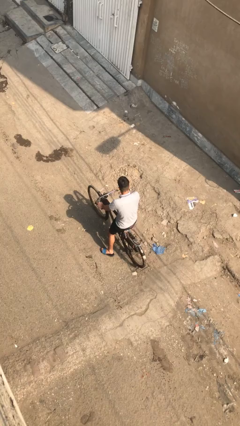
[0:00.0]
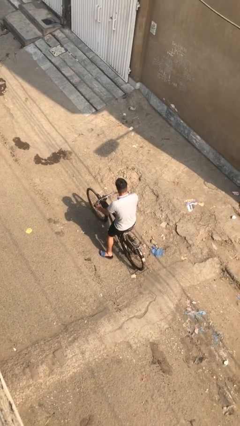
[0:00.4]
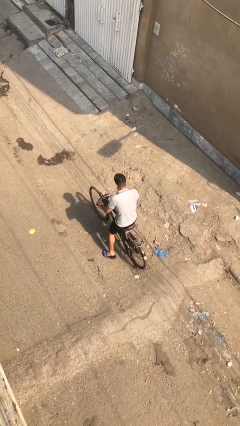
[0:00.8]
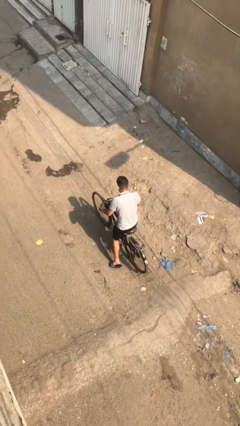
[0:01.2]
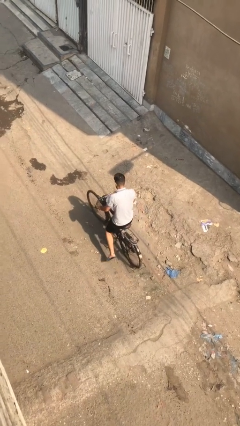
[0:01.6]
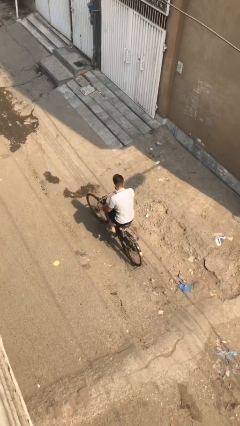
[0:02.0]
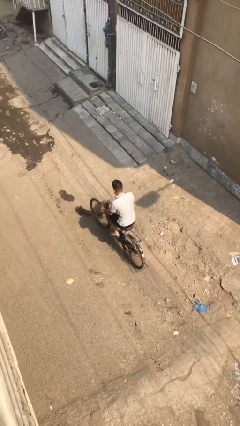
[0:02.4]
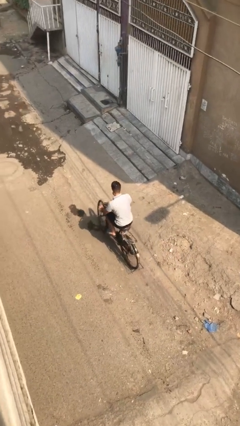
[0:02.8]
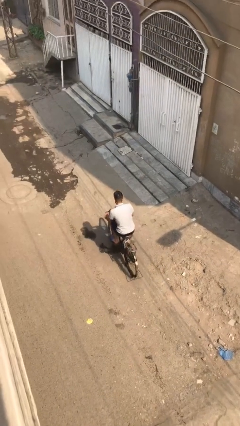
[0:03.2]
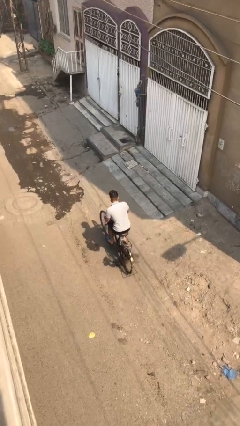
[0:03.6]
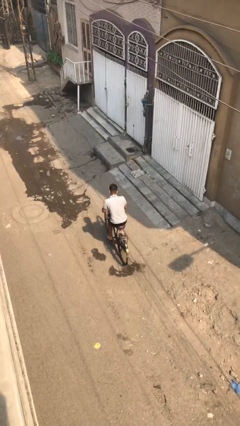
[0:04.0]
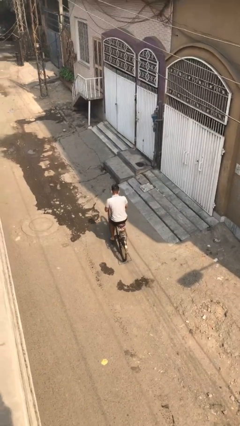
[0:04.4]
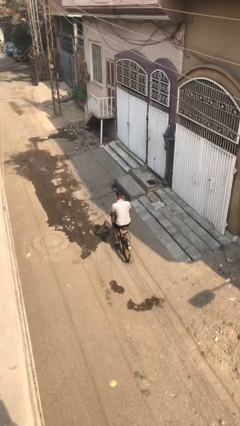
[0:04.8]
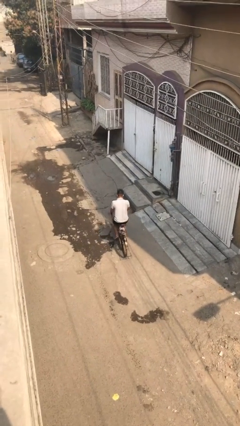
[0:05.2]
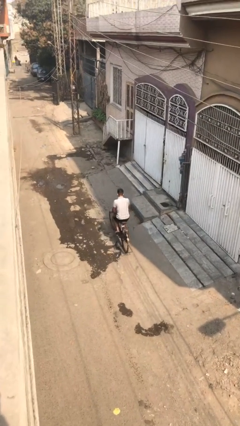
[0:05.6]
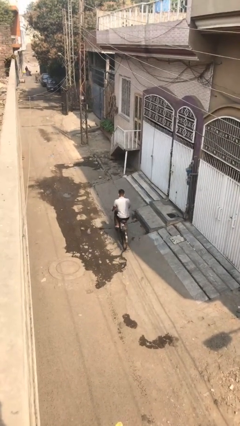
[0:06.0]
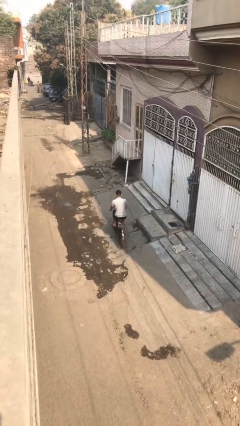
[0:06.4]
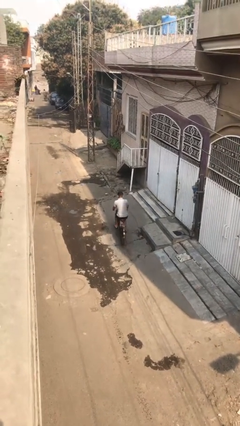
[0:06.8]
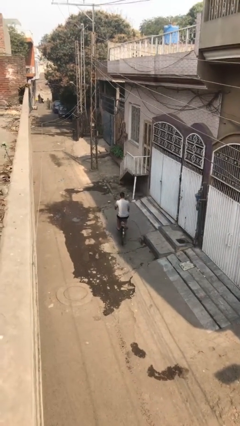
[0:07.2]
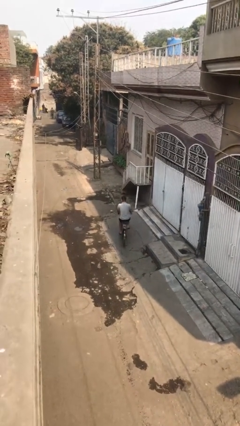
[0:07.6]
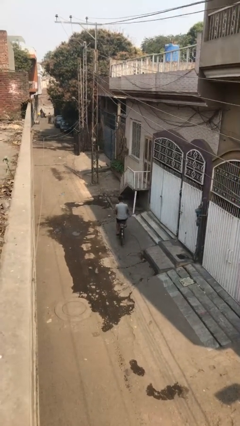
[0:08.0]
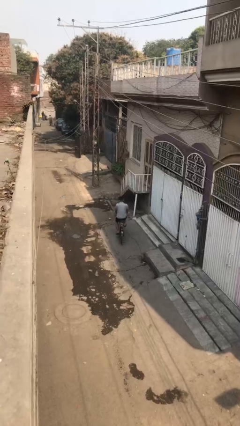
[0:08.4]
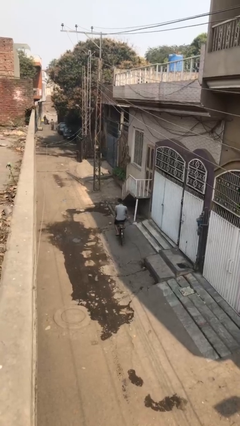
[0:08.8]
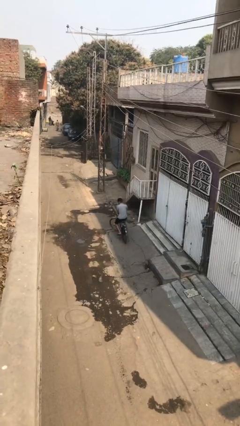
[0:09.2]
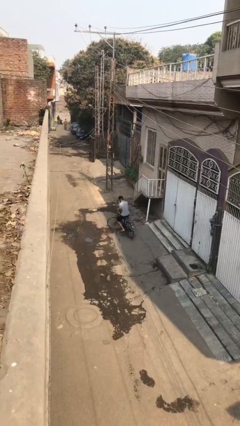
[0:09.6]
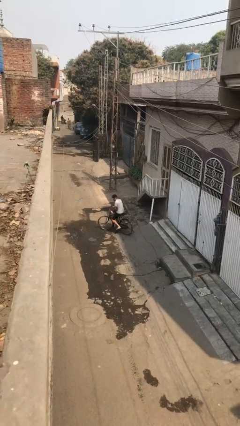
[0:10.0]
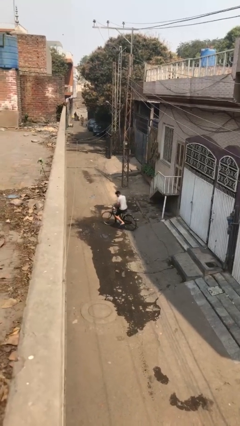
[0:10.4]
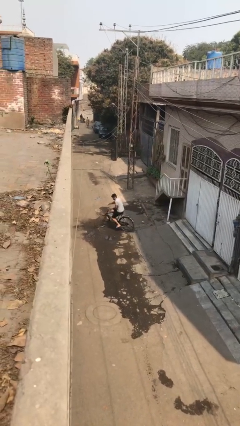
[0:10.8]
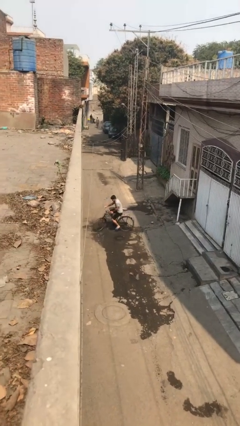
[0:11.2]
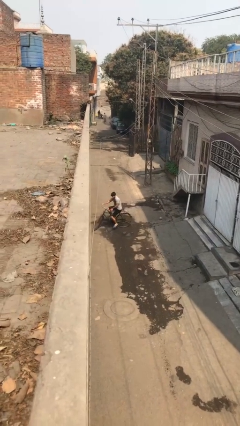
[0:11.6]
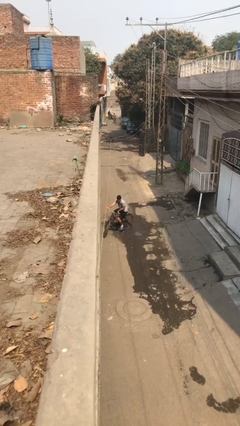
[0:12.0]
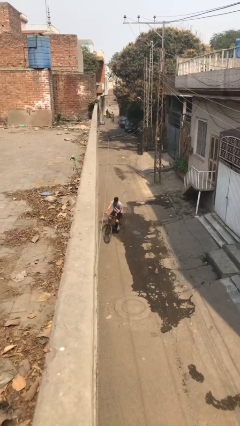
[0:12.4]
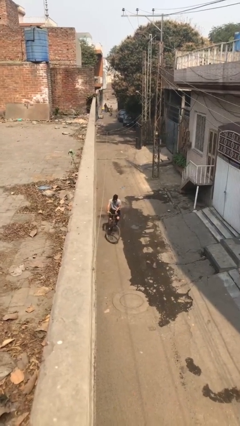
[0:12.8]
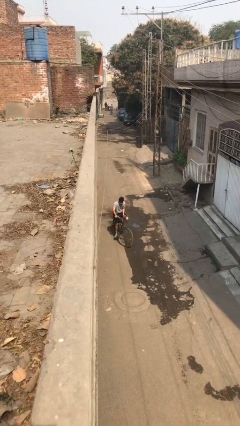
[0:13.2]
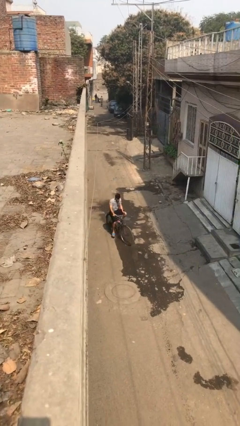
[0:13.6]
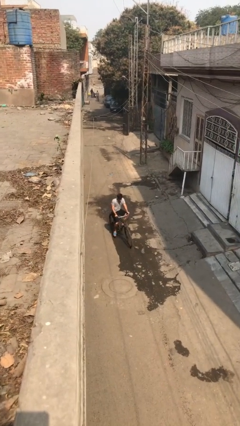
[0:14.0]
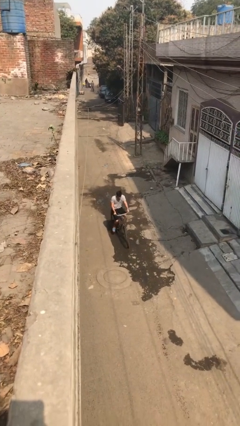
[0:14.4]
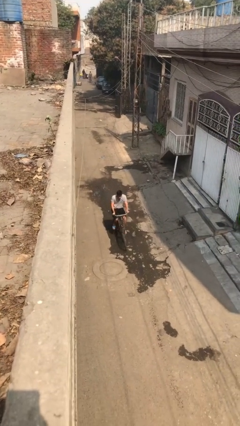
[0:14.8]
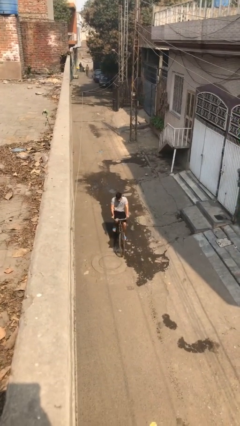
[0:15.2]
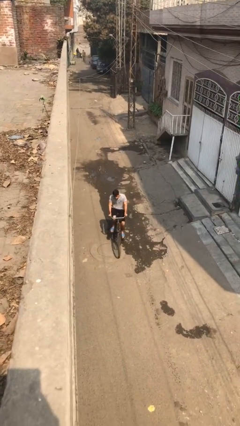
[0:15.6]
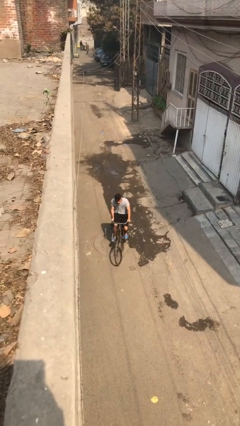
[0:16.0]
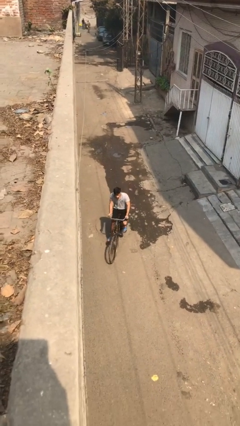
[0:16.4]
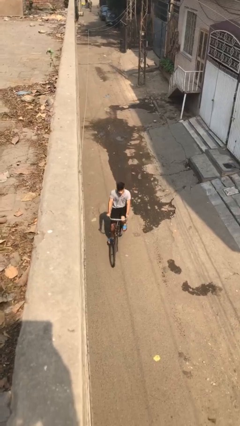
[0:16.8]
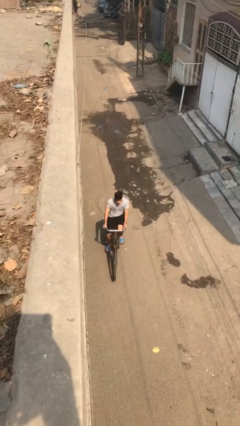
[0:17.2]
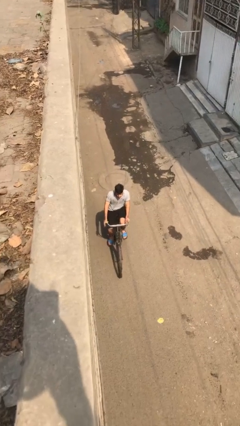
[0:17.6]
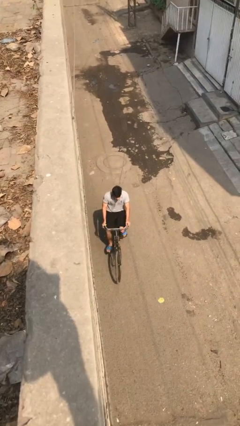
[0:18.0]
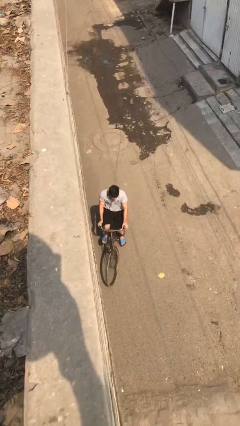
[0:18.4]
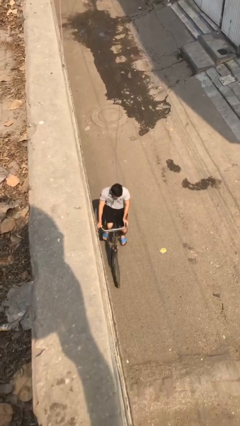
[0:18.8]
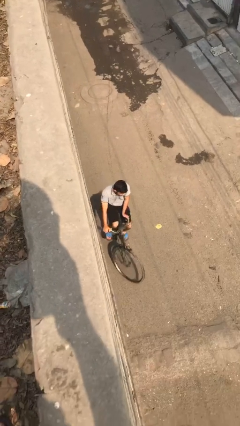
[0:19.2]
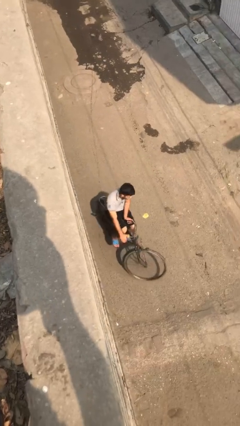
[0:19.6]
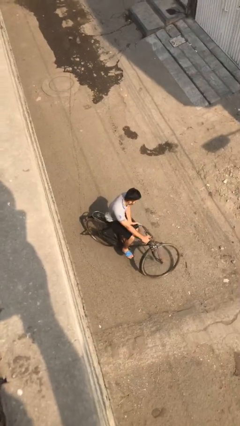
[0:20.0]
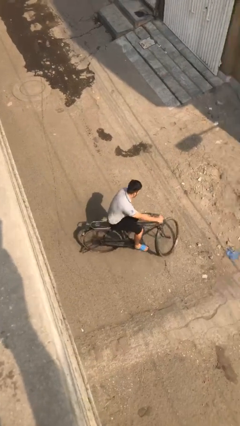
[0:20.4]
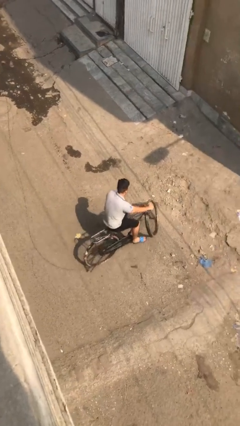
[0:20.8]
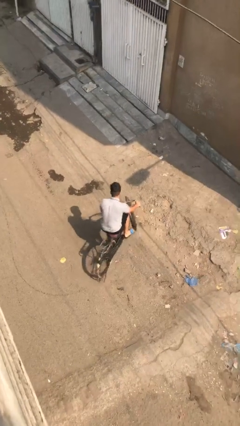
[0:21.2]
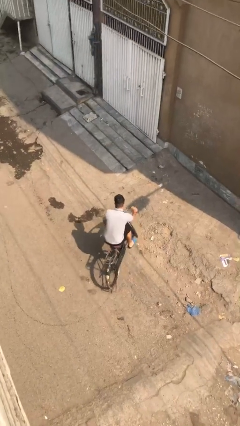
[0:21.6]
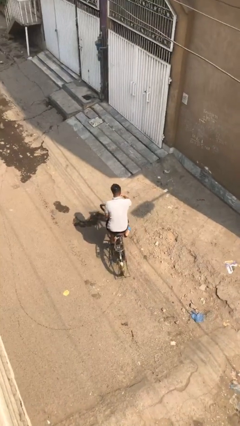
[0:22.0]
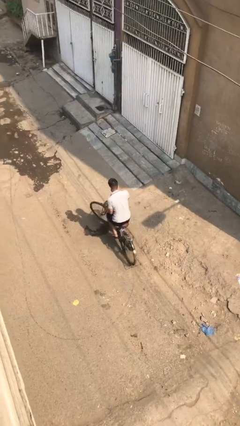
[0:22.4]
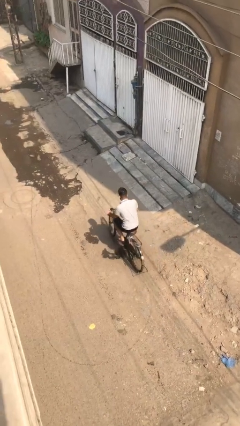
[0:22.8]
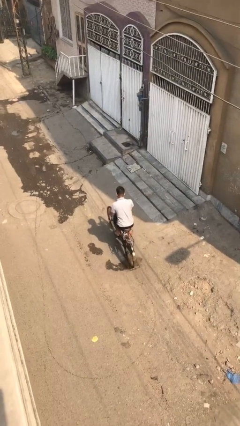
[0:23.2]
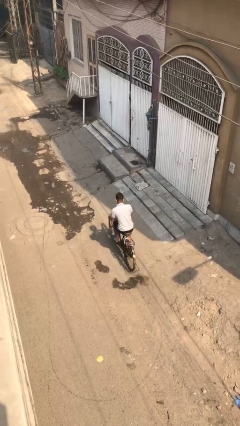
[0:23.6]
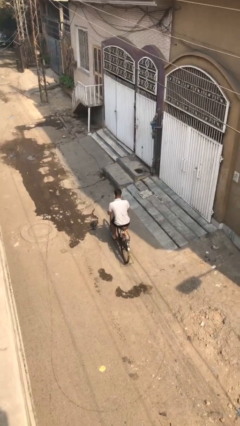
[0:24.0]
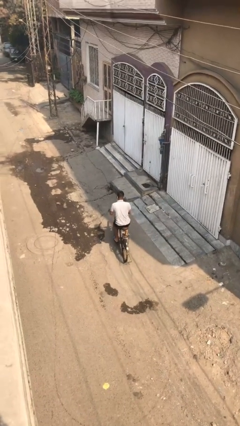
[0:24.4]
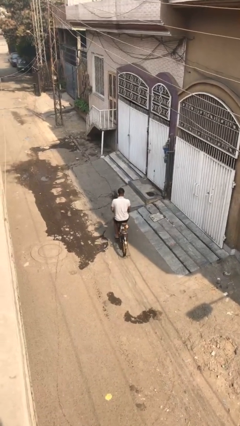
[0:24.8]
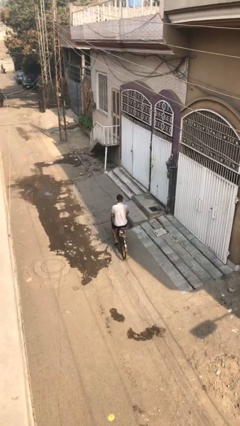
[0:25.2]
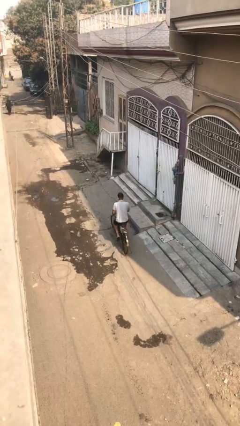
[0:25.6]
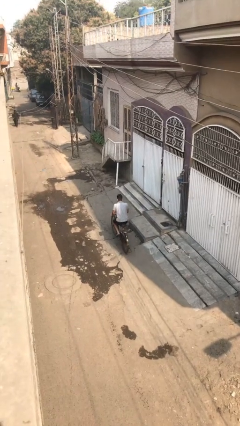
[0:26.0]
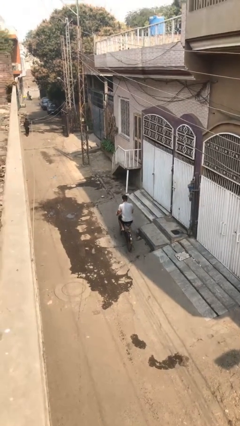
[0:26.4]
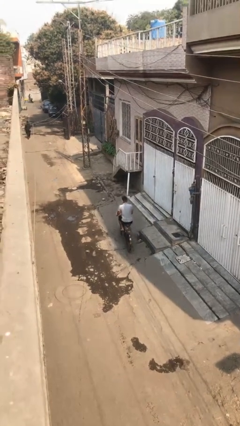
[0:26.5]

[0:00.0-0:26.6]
person rides bicycle

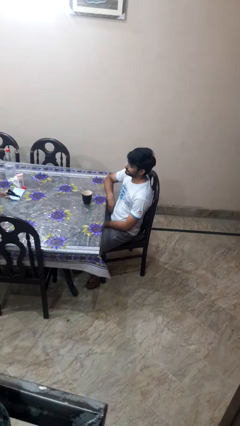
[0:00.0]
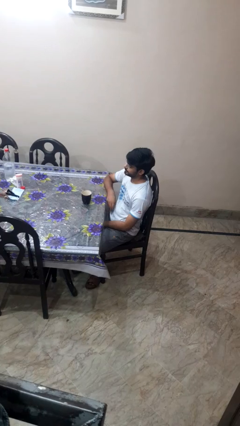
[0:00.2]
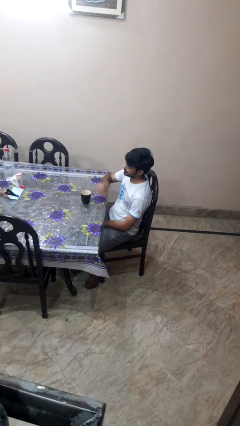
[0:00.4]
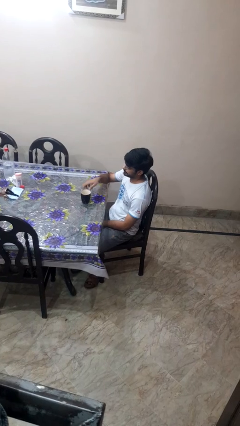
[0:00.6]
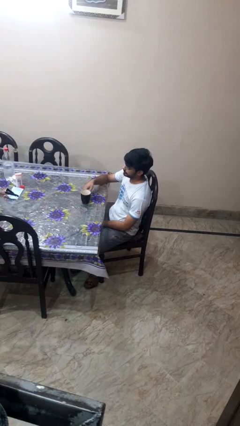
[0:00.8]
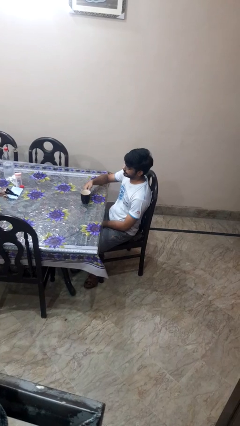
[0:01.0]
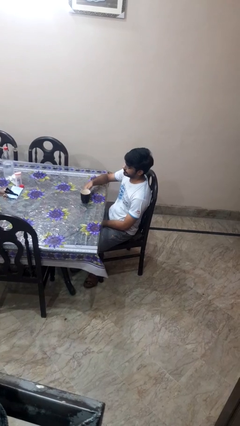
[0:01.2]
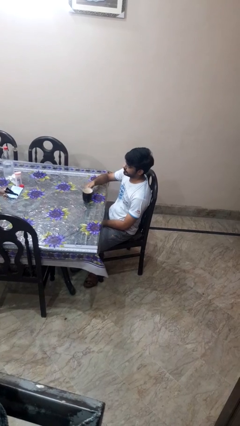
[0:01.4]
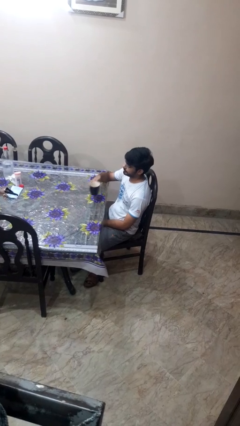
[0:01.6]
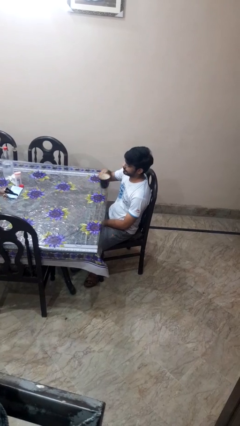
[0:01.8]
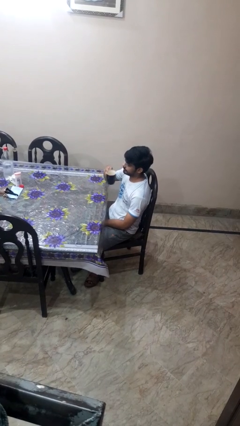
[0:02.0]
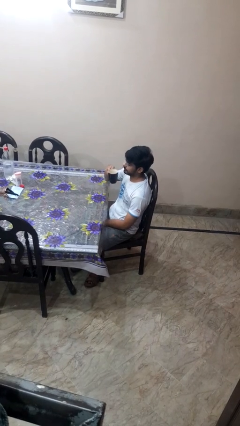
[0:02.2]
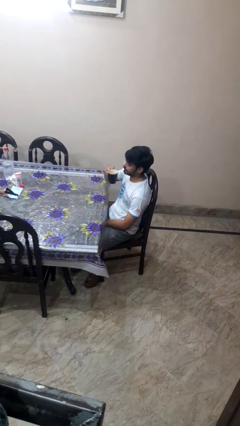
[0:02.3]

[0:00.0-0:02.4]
person picks up object from table

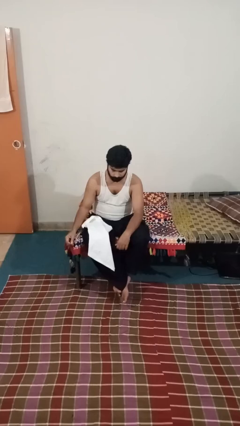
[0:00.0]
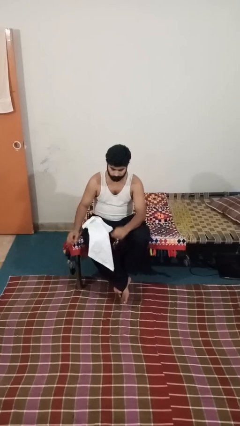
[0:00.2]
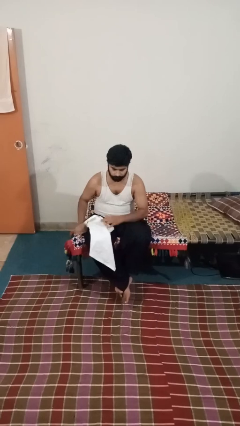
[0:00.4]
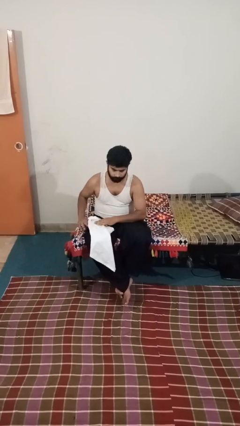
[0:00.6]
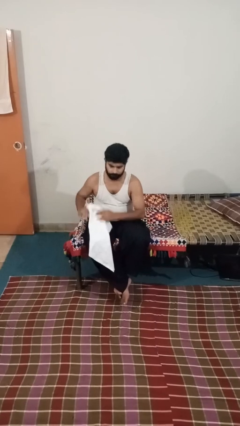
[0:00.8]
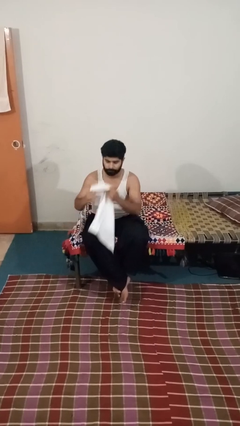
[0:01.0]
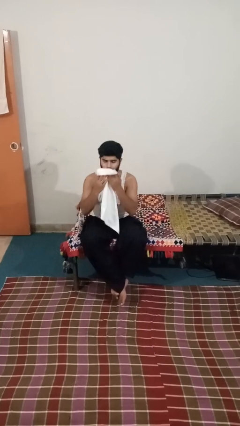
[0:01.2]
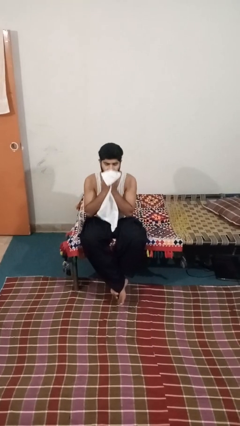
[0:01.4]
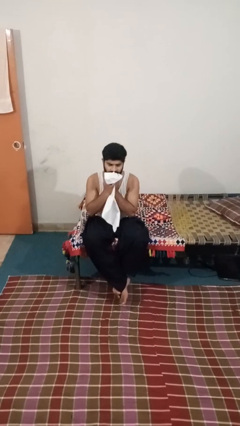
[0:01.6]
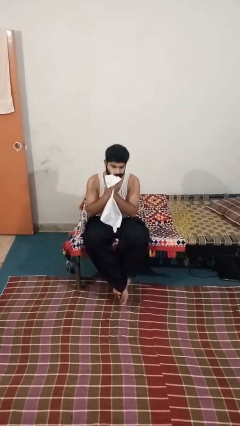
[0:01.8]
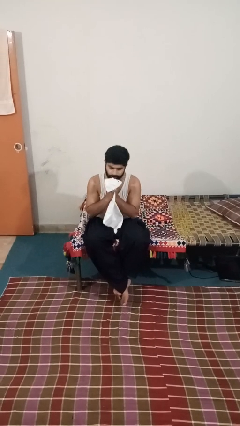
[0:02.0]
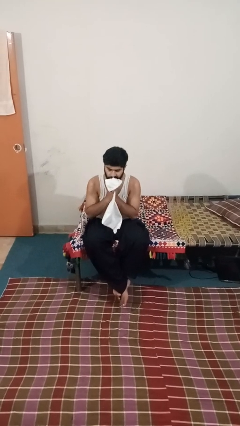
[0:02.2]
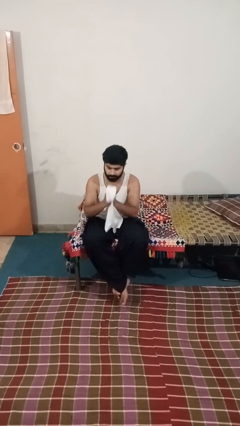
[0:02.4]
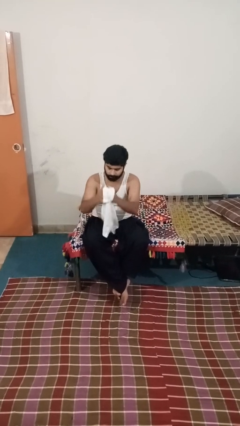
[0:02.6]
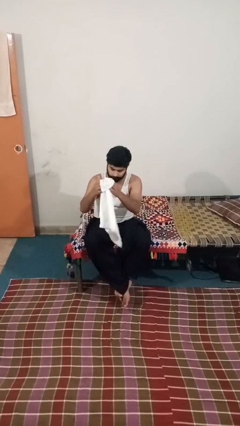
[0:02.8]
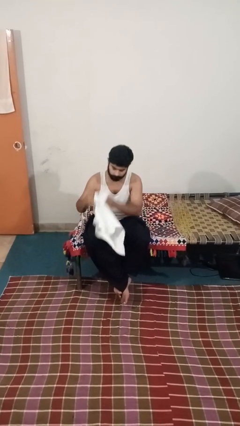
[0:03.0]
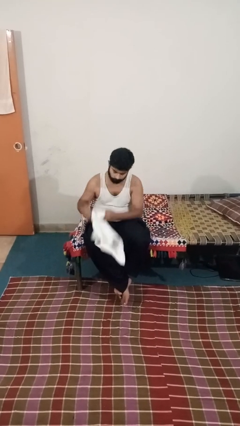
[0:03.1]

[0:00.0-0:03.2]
person wipes mouth with napkin
